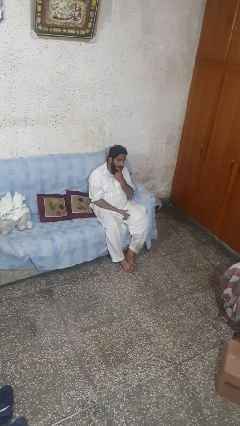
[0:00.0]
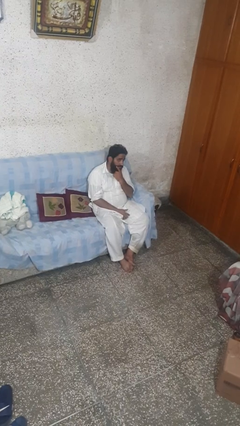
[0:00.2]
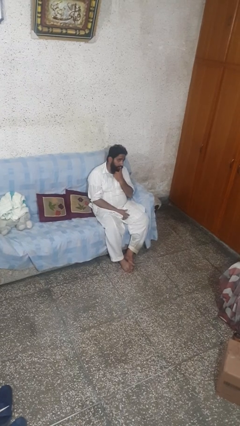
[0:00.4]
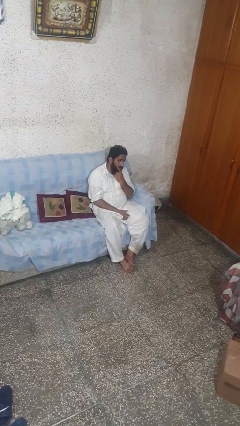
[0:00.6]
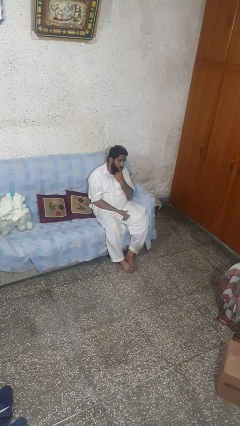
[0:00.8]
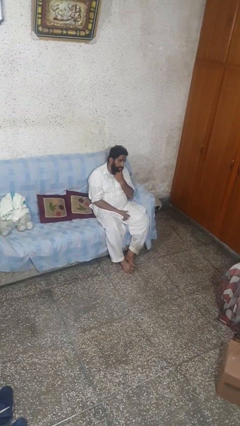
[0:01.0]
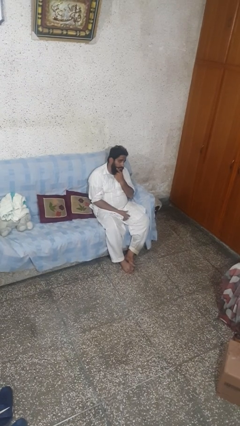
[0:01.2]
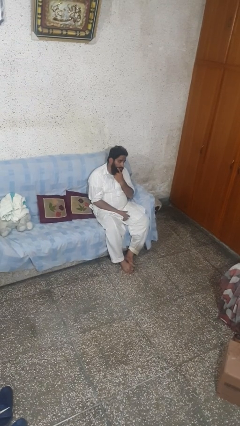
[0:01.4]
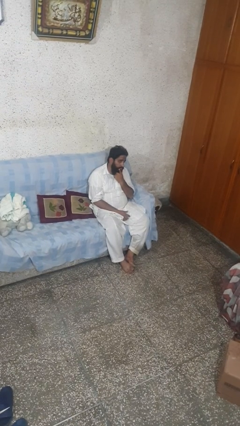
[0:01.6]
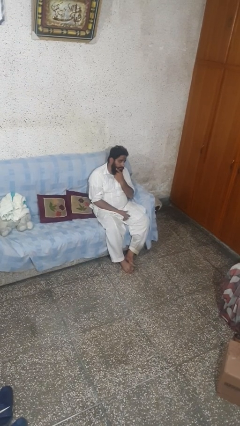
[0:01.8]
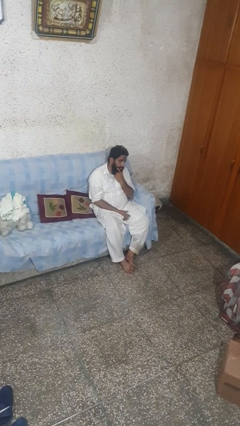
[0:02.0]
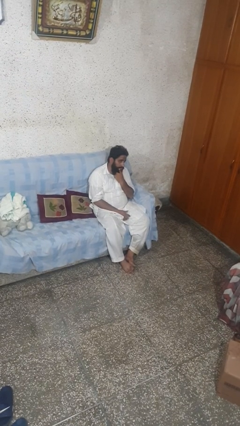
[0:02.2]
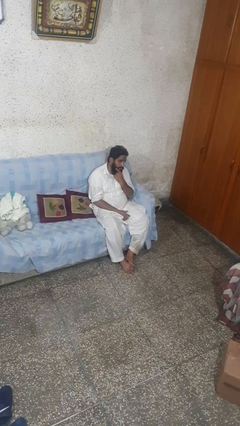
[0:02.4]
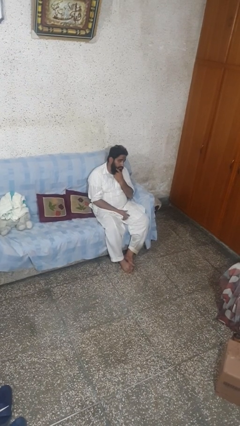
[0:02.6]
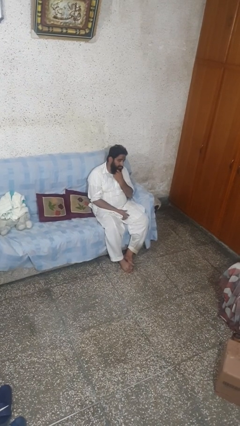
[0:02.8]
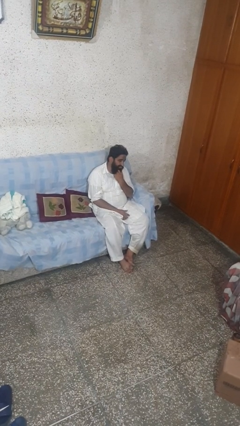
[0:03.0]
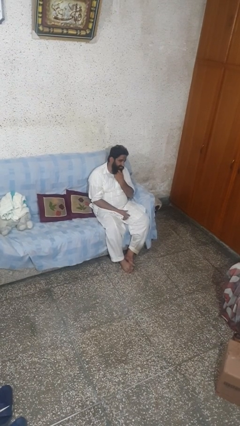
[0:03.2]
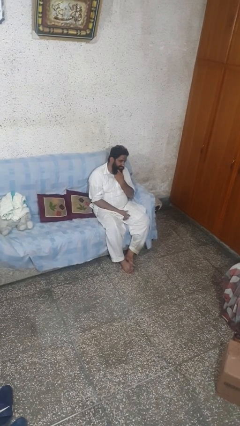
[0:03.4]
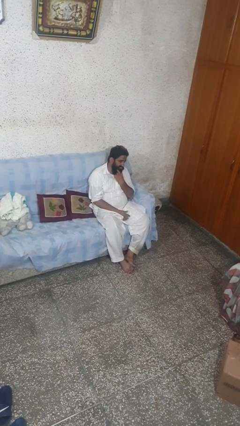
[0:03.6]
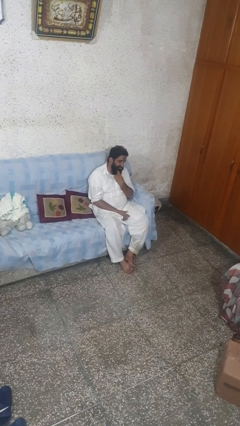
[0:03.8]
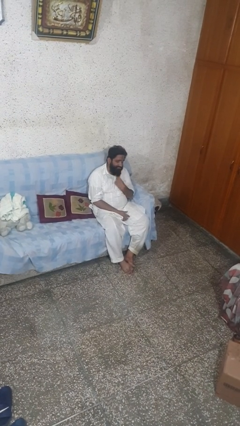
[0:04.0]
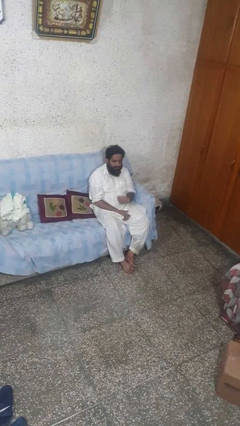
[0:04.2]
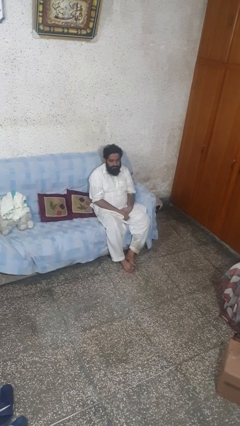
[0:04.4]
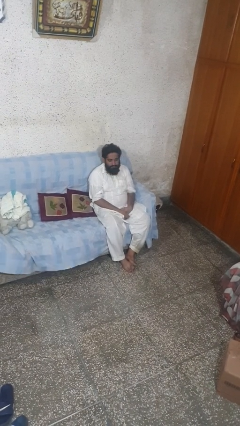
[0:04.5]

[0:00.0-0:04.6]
person strokes chin

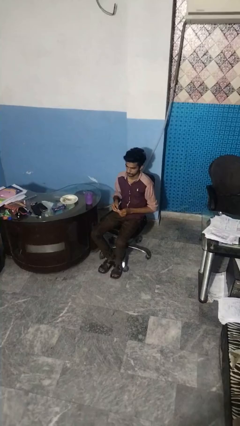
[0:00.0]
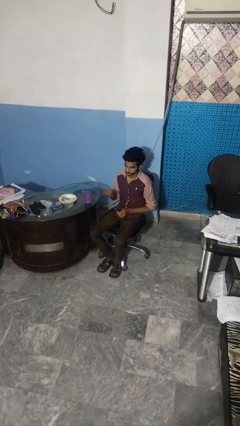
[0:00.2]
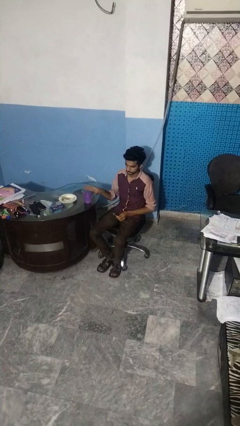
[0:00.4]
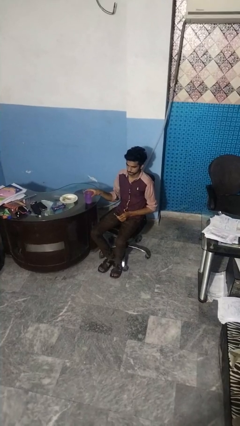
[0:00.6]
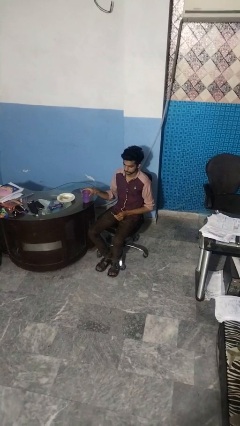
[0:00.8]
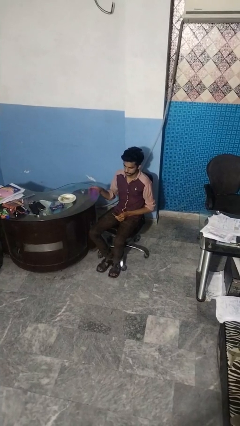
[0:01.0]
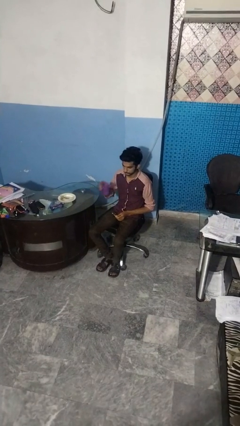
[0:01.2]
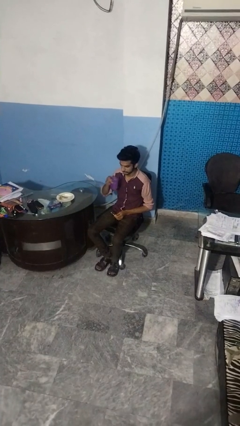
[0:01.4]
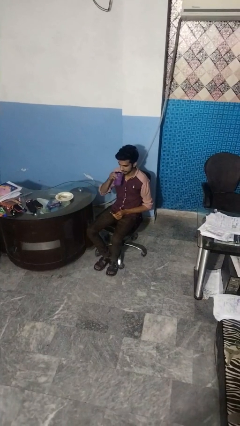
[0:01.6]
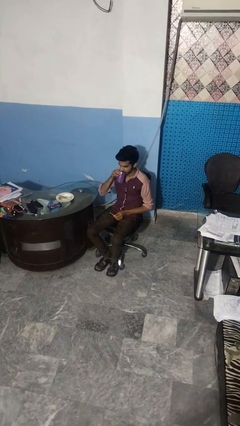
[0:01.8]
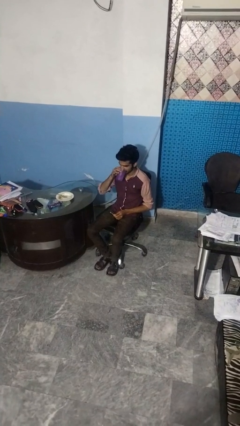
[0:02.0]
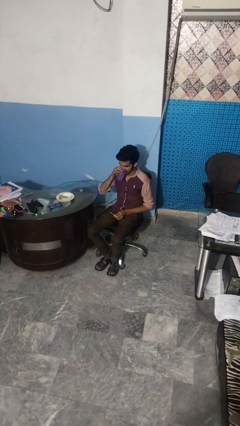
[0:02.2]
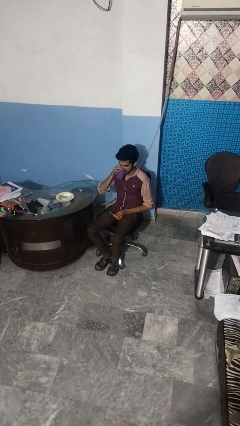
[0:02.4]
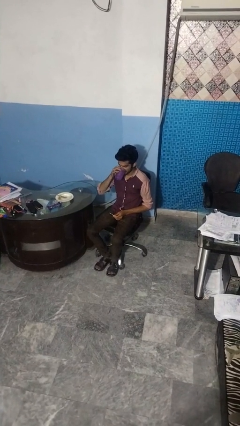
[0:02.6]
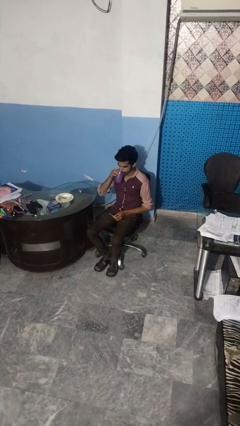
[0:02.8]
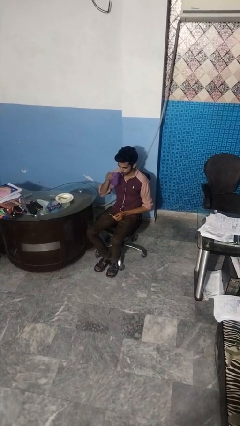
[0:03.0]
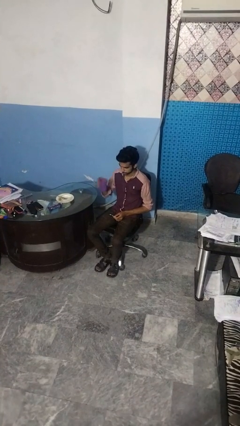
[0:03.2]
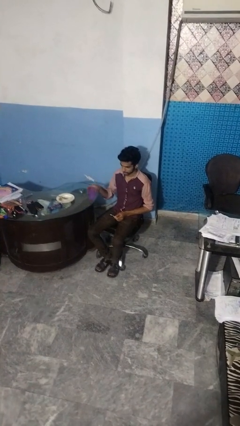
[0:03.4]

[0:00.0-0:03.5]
person drinks from cup

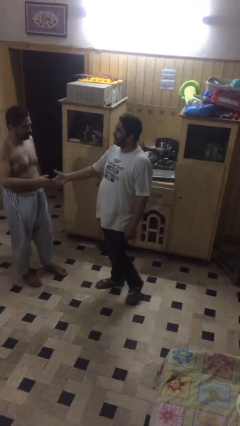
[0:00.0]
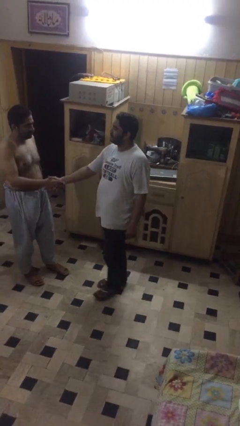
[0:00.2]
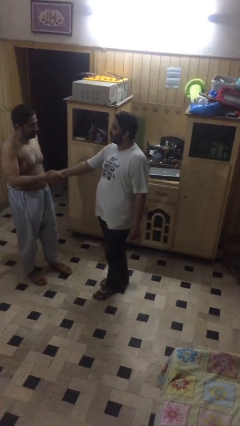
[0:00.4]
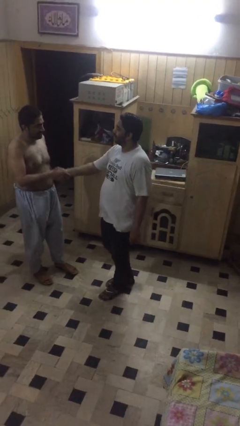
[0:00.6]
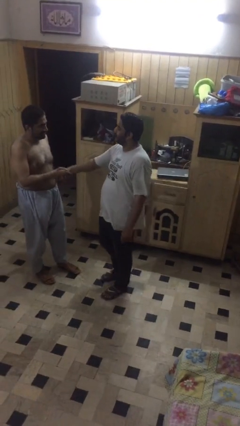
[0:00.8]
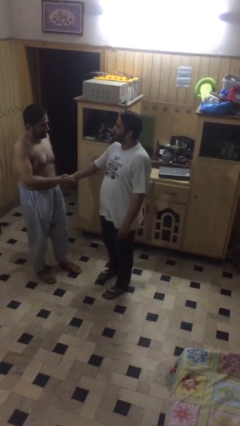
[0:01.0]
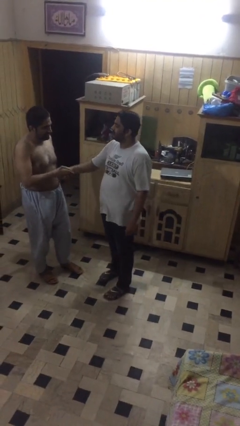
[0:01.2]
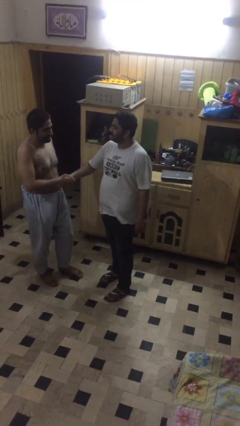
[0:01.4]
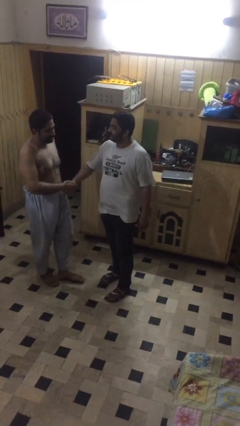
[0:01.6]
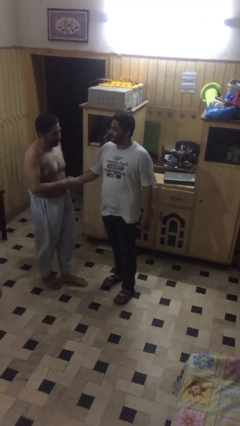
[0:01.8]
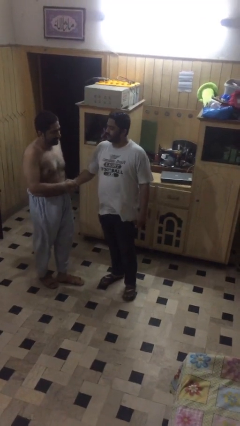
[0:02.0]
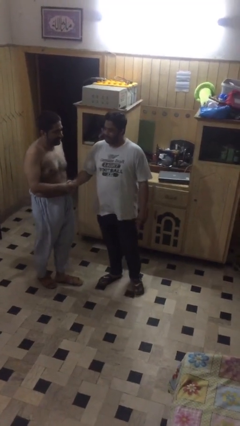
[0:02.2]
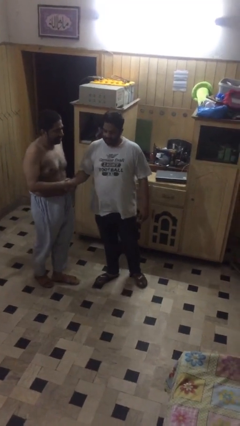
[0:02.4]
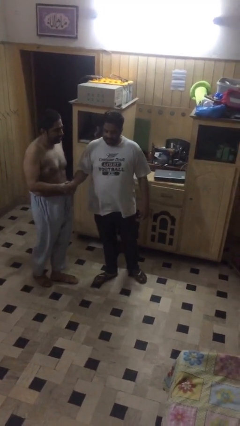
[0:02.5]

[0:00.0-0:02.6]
person shakes hand

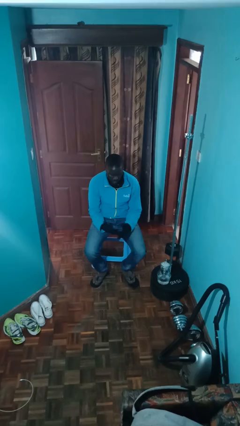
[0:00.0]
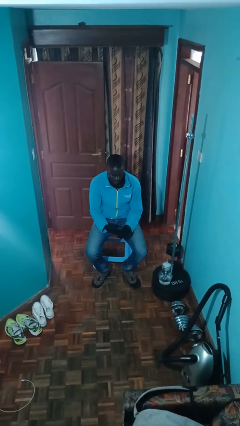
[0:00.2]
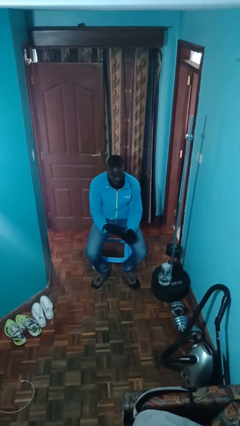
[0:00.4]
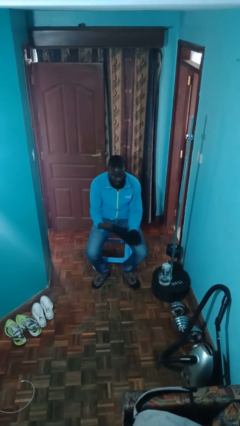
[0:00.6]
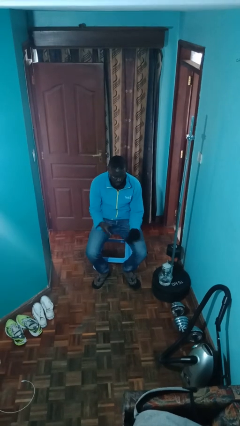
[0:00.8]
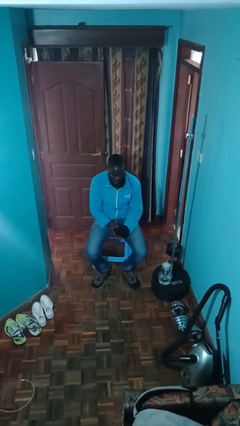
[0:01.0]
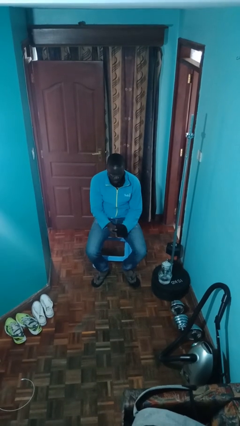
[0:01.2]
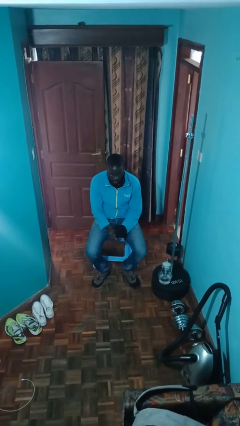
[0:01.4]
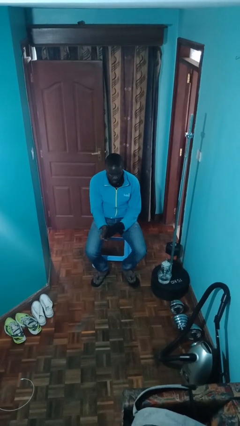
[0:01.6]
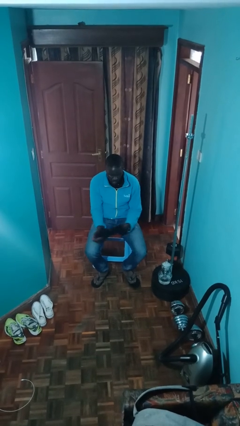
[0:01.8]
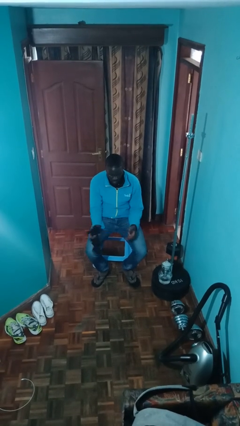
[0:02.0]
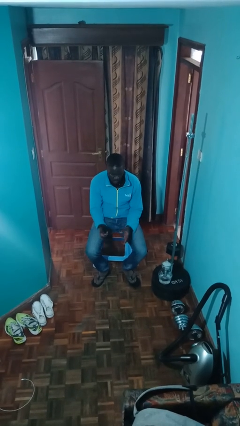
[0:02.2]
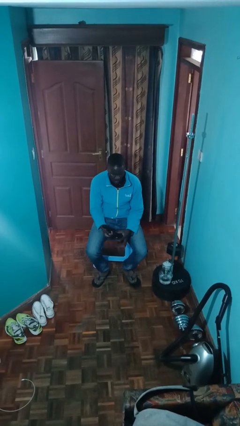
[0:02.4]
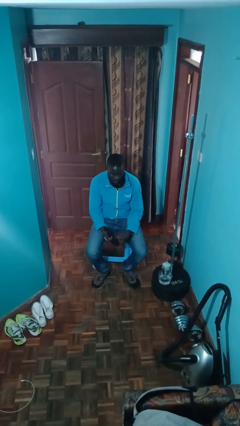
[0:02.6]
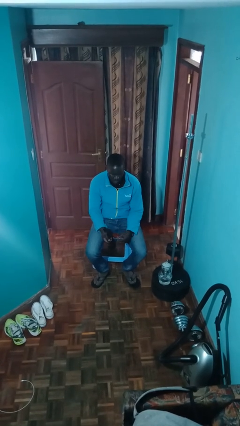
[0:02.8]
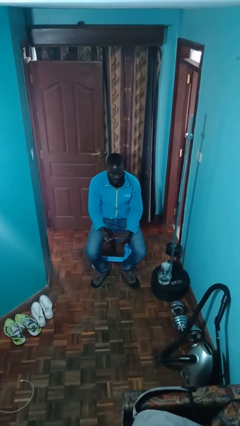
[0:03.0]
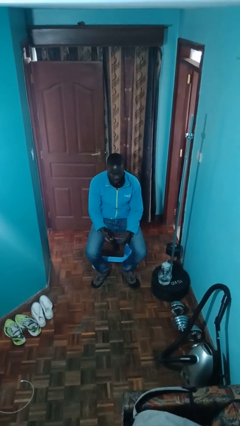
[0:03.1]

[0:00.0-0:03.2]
person takes off gloves

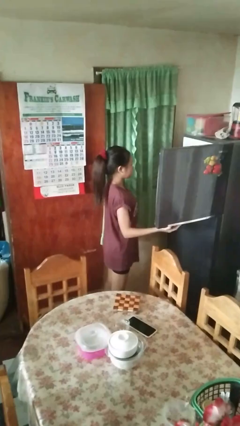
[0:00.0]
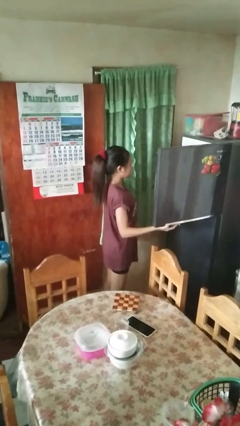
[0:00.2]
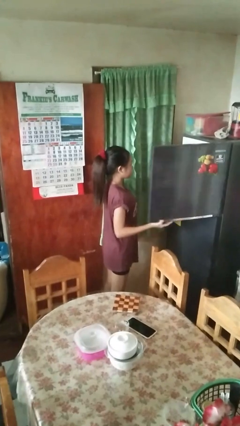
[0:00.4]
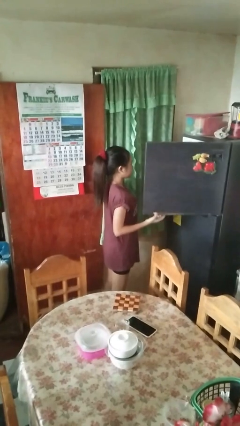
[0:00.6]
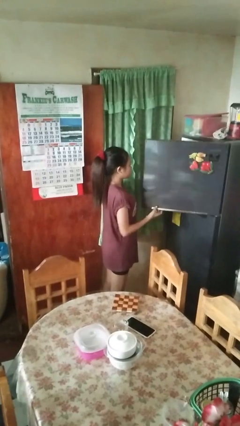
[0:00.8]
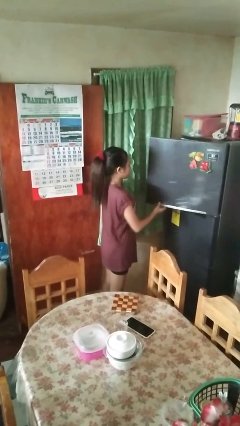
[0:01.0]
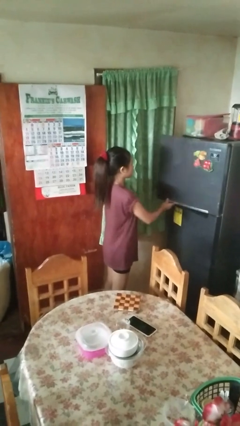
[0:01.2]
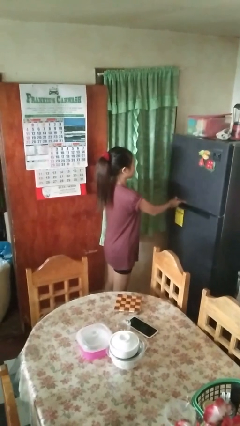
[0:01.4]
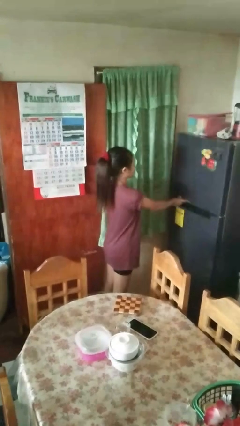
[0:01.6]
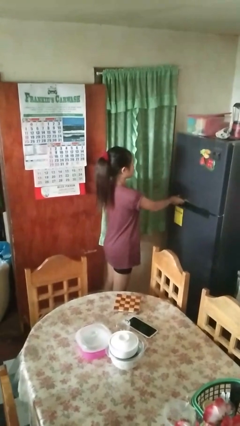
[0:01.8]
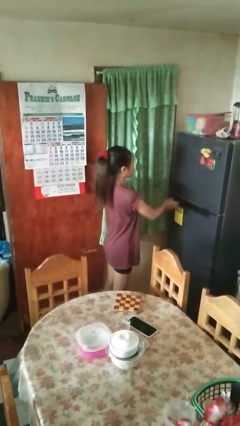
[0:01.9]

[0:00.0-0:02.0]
person closes refrigerator

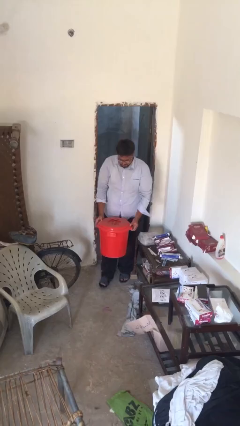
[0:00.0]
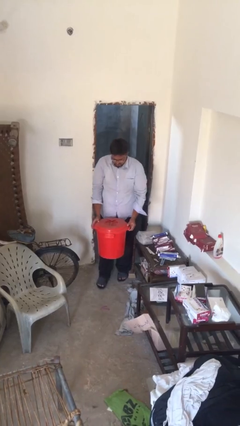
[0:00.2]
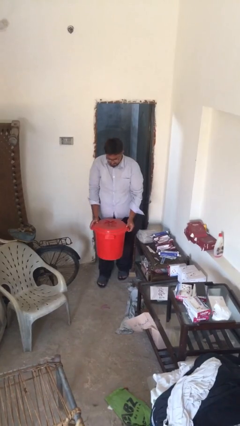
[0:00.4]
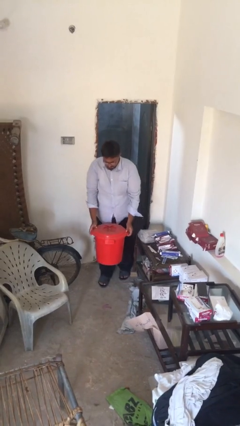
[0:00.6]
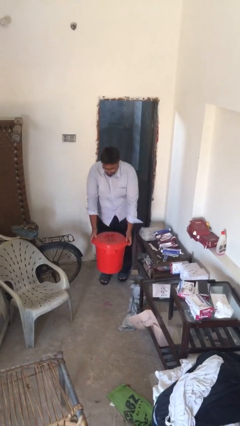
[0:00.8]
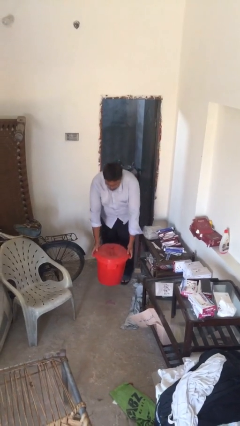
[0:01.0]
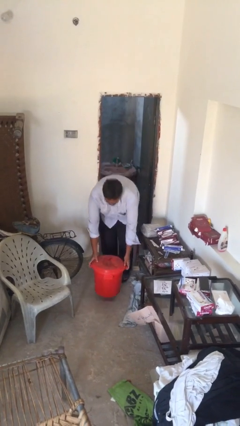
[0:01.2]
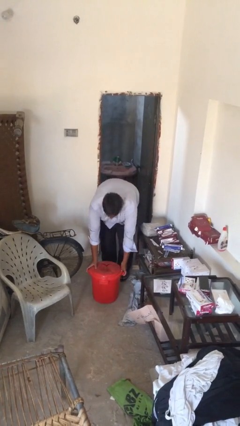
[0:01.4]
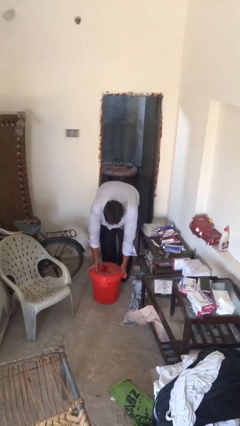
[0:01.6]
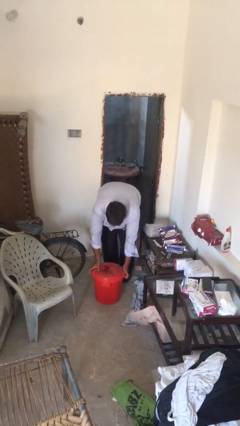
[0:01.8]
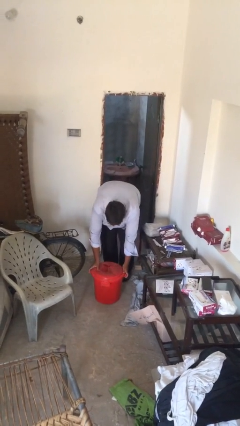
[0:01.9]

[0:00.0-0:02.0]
person puts down object on floor
